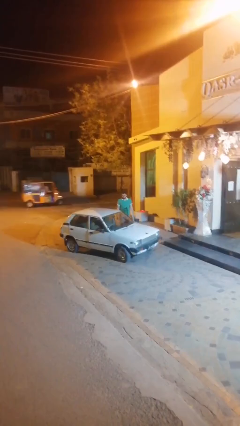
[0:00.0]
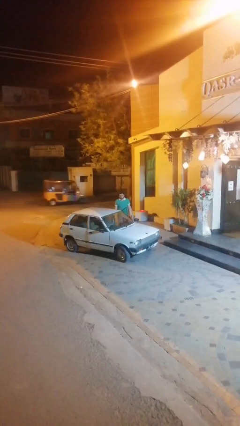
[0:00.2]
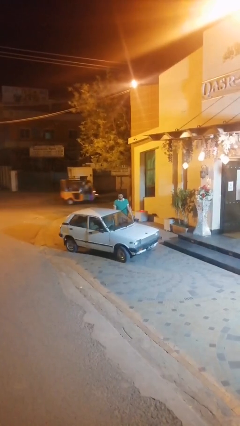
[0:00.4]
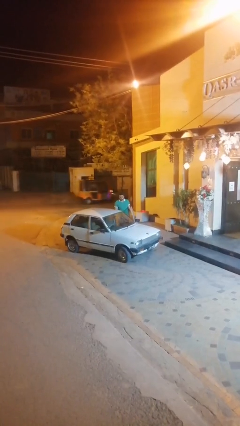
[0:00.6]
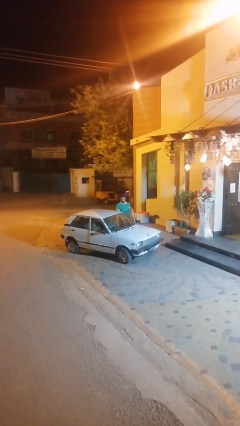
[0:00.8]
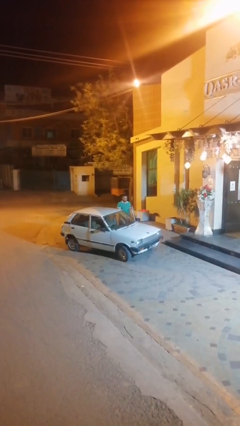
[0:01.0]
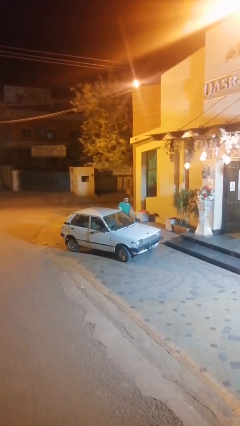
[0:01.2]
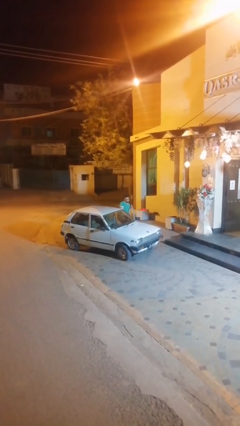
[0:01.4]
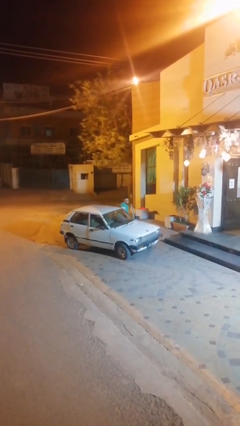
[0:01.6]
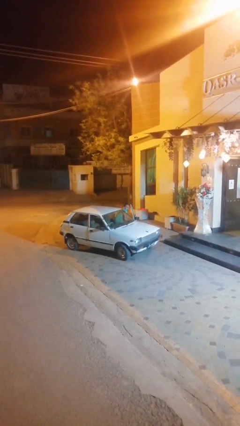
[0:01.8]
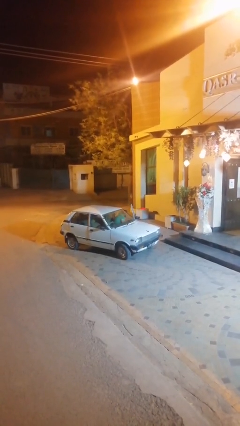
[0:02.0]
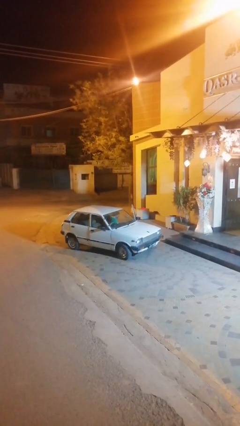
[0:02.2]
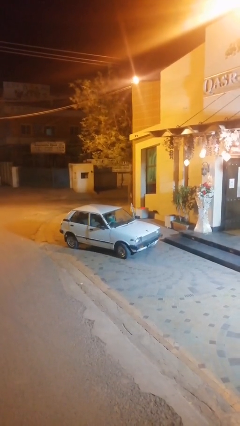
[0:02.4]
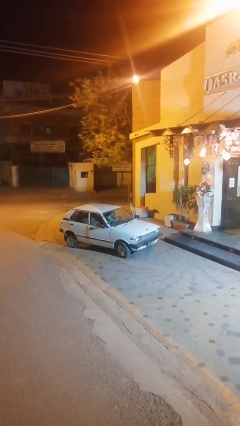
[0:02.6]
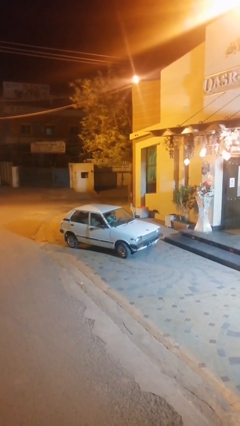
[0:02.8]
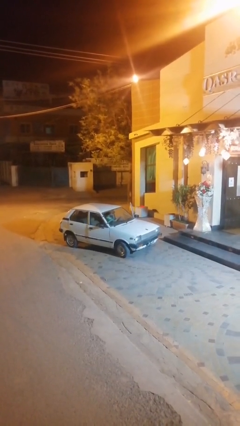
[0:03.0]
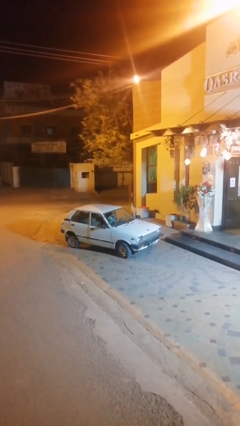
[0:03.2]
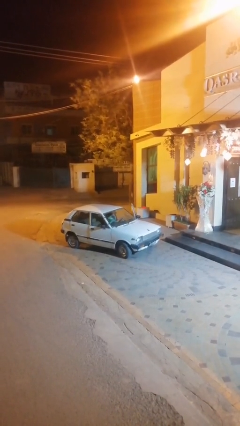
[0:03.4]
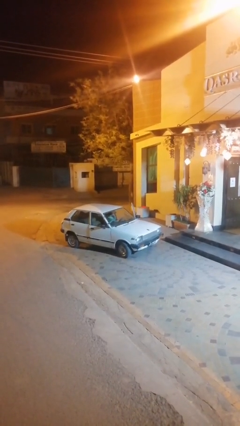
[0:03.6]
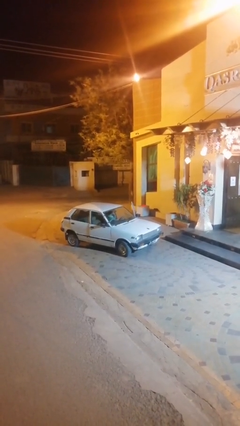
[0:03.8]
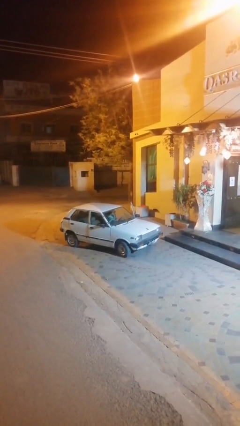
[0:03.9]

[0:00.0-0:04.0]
person enters car

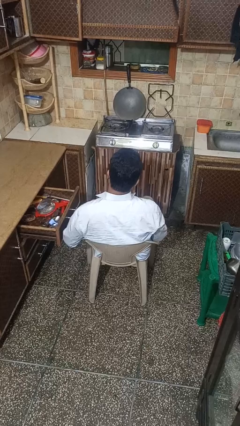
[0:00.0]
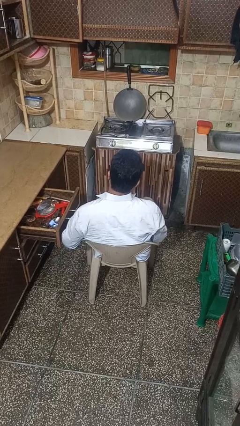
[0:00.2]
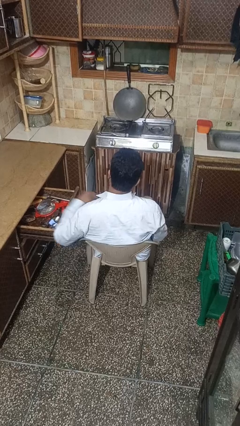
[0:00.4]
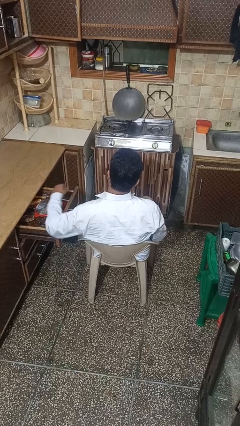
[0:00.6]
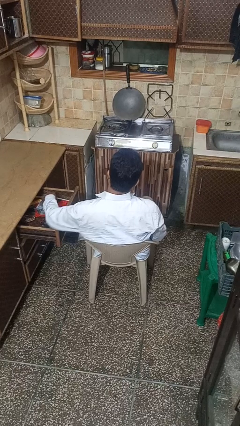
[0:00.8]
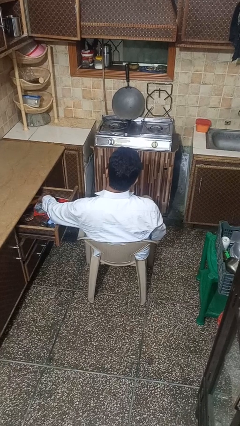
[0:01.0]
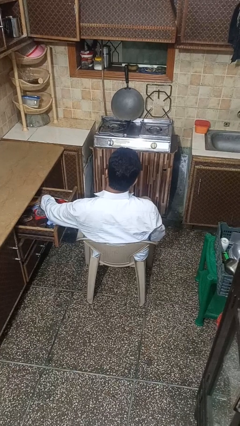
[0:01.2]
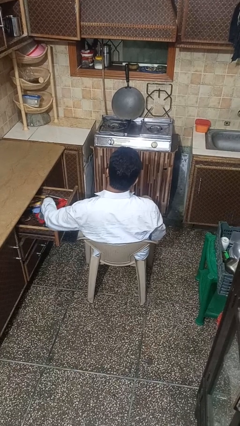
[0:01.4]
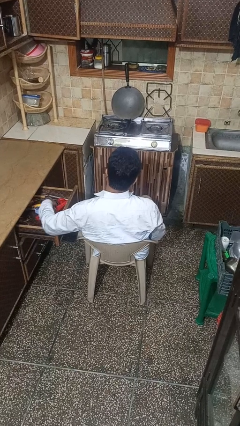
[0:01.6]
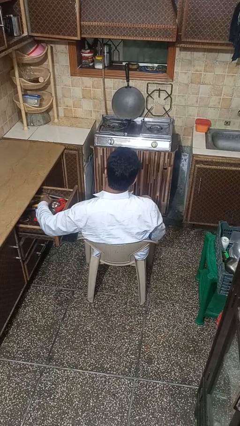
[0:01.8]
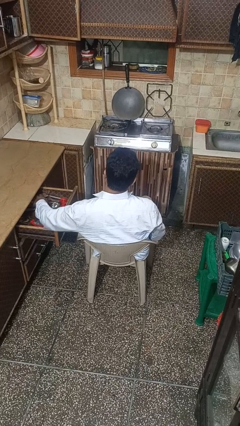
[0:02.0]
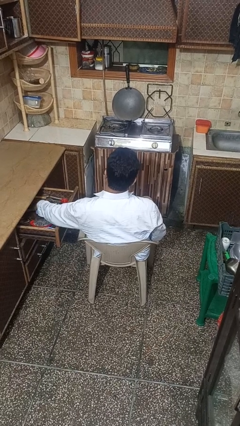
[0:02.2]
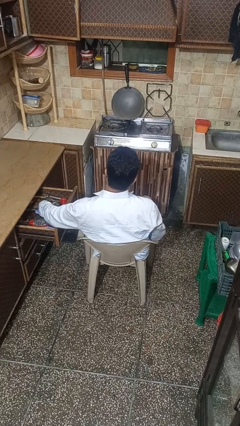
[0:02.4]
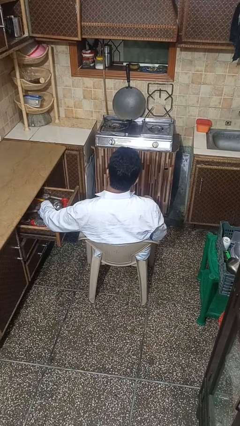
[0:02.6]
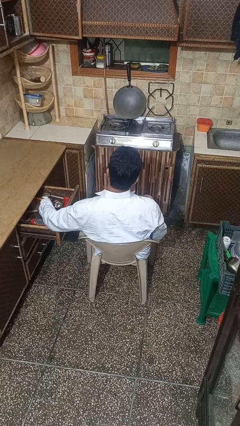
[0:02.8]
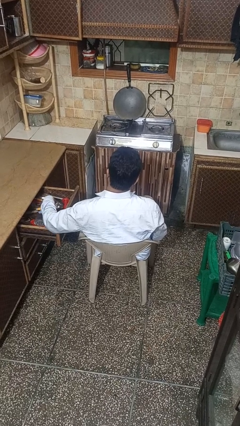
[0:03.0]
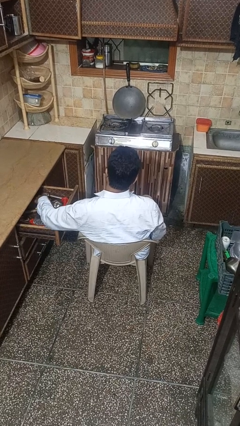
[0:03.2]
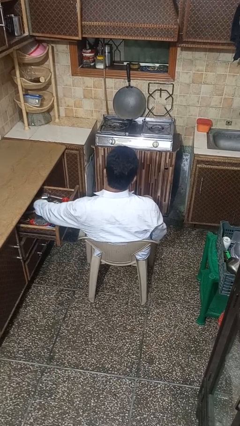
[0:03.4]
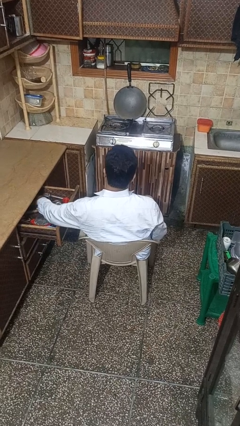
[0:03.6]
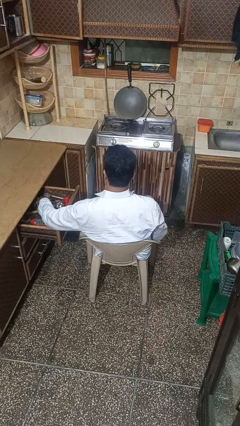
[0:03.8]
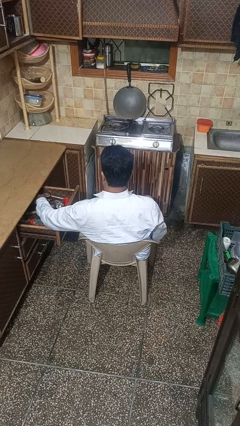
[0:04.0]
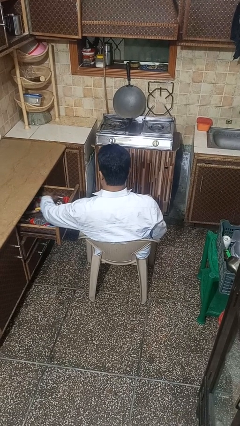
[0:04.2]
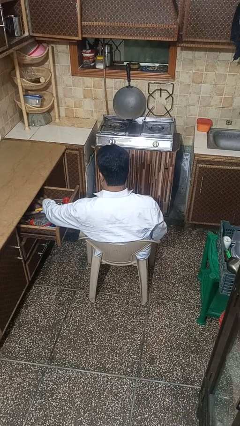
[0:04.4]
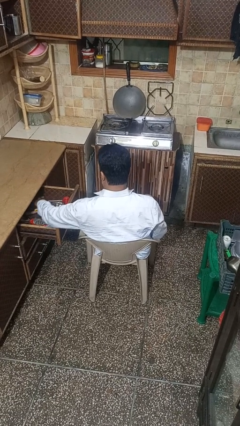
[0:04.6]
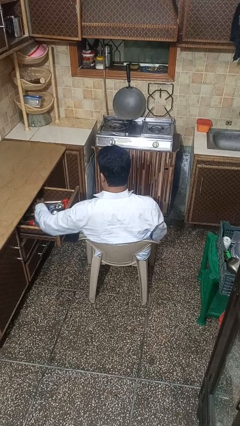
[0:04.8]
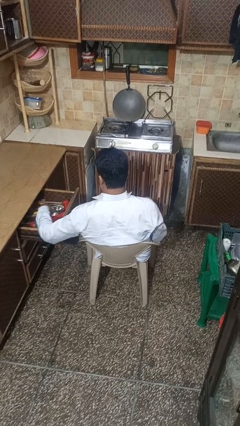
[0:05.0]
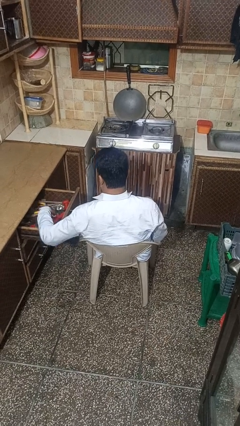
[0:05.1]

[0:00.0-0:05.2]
person searches in kitchen drawer

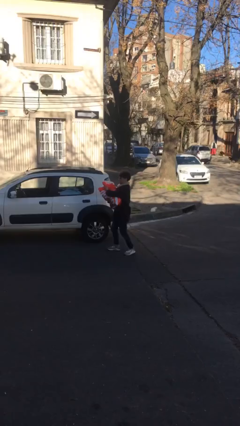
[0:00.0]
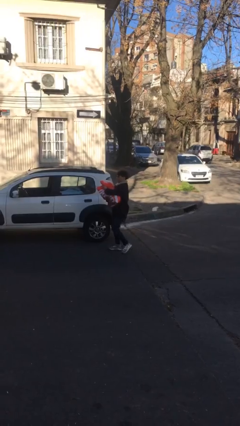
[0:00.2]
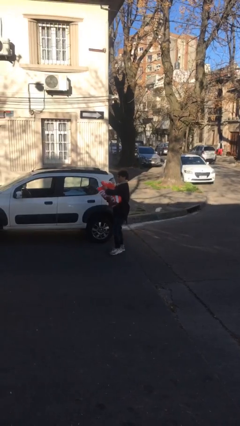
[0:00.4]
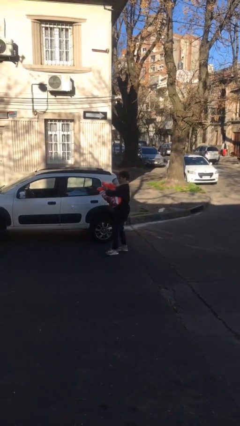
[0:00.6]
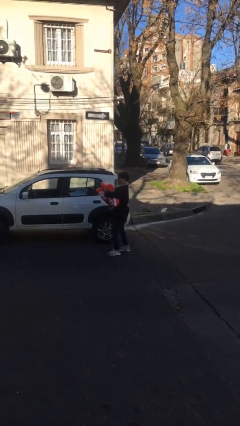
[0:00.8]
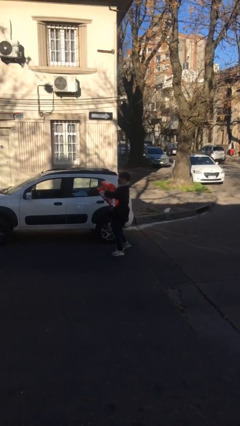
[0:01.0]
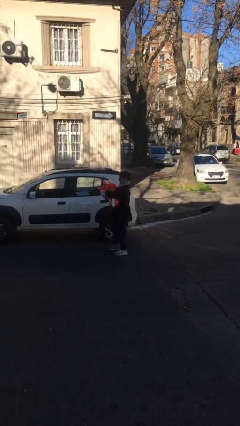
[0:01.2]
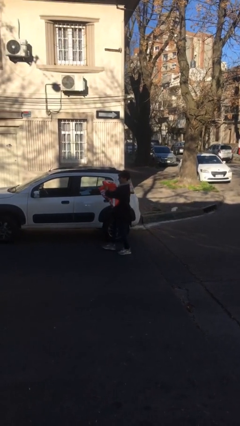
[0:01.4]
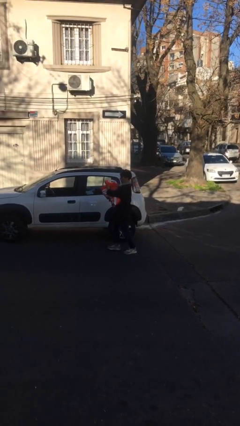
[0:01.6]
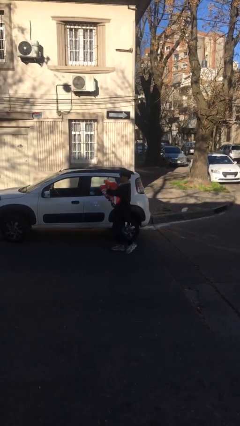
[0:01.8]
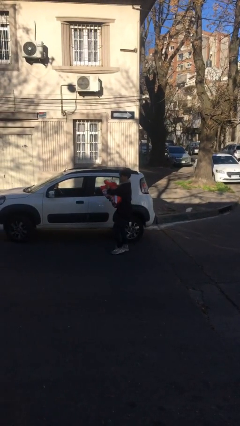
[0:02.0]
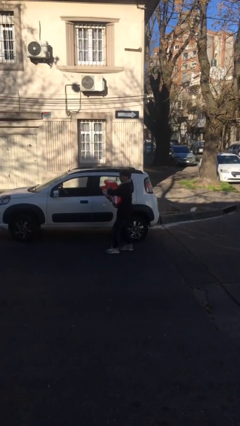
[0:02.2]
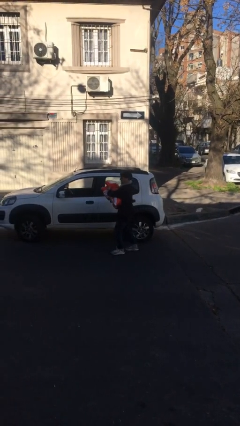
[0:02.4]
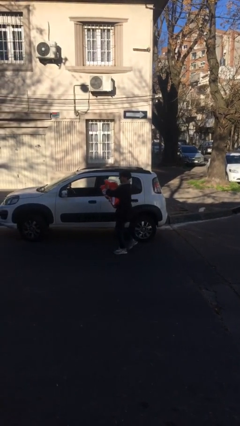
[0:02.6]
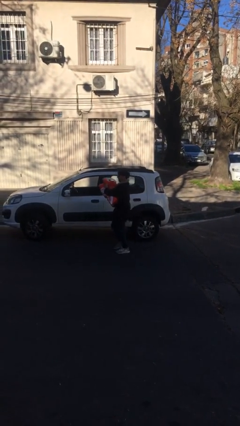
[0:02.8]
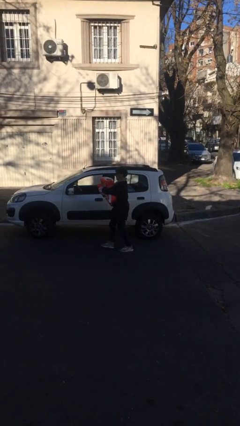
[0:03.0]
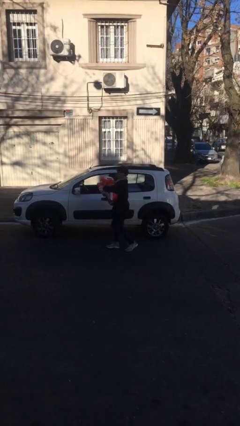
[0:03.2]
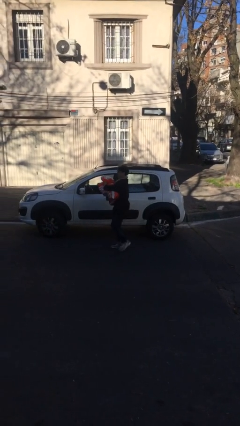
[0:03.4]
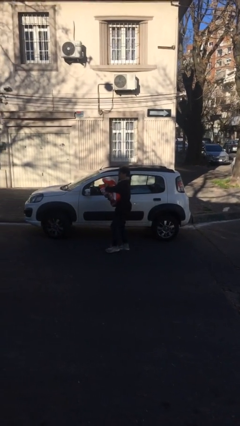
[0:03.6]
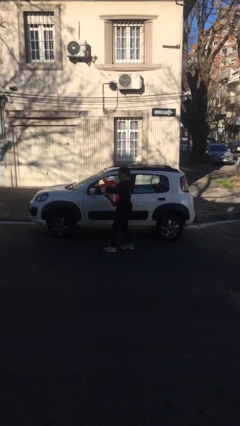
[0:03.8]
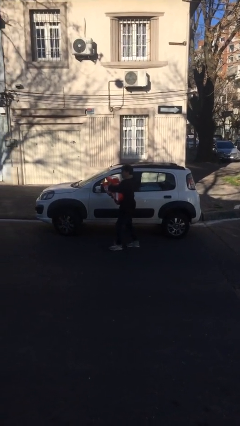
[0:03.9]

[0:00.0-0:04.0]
person carries heavy object

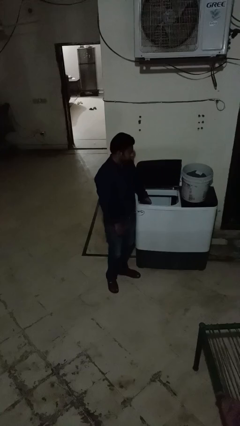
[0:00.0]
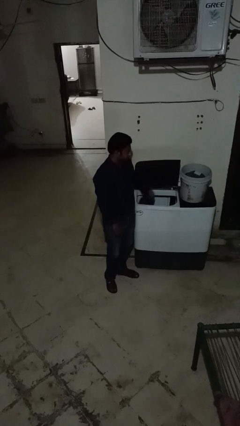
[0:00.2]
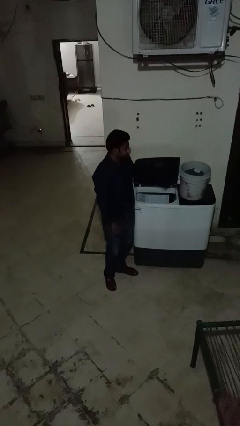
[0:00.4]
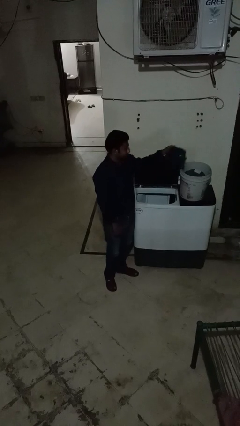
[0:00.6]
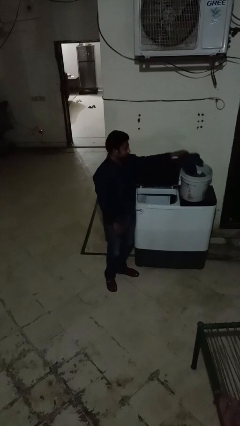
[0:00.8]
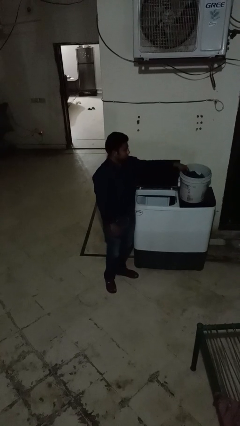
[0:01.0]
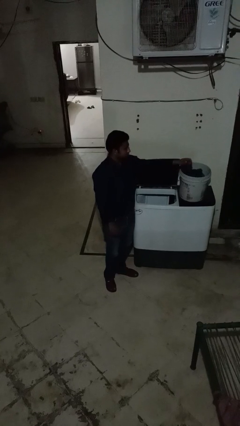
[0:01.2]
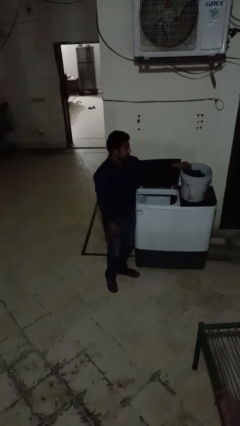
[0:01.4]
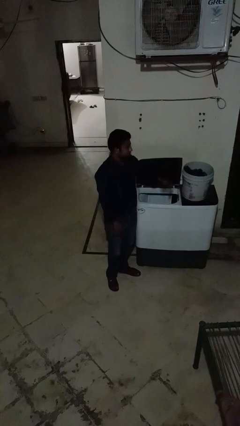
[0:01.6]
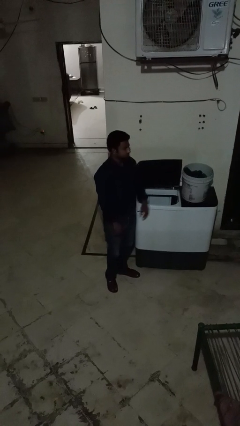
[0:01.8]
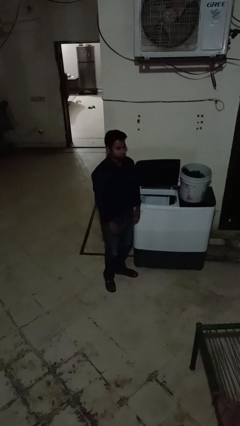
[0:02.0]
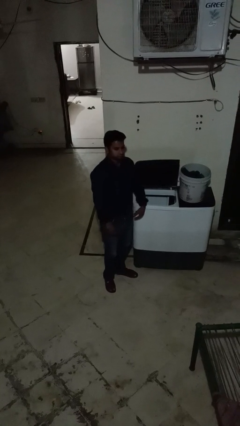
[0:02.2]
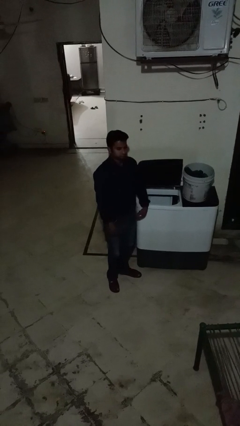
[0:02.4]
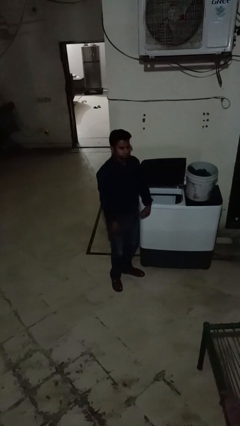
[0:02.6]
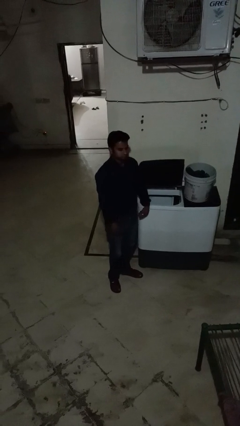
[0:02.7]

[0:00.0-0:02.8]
person unloads clotheswasher

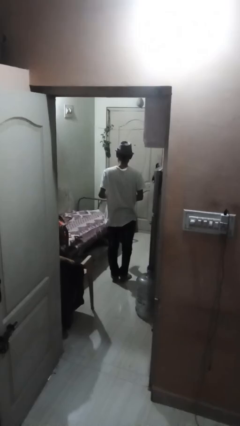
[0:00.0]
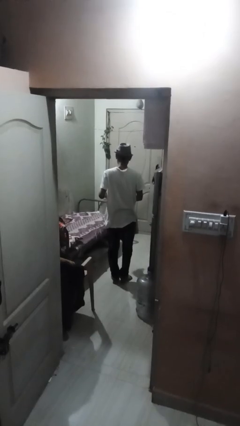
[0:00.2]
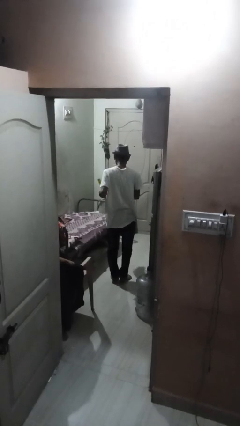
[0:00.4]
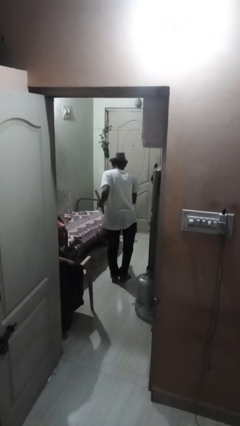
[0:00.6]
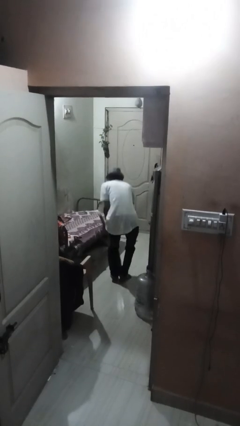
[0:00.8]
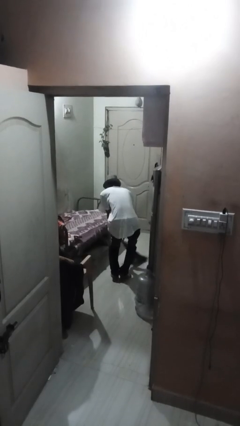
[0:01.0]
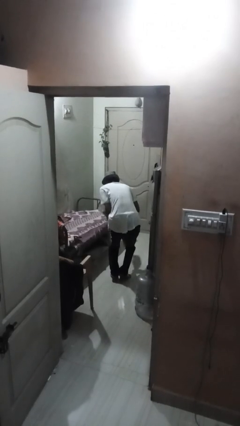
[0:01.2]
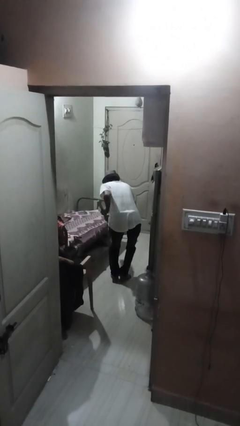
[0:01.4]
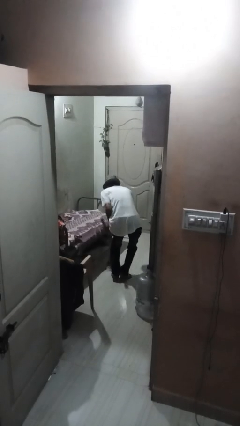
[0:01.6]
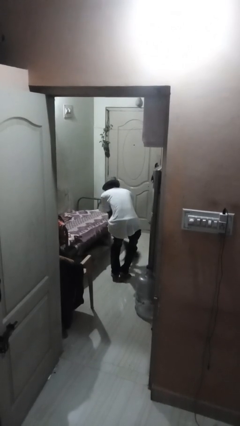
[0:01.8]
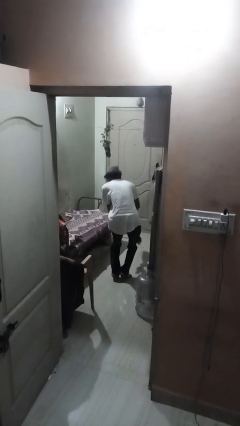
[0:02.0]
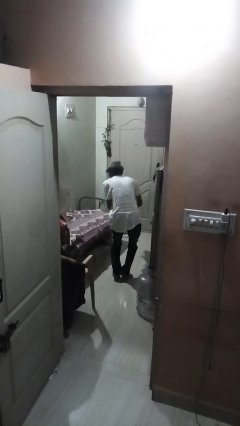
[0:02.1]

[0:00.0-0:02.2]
person mops
